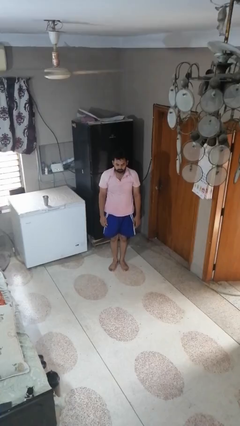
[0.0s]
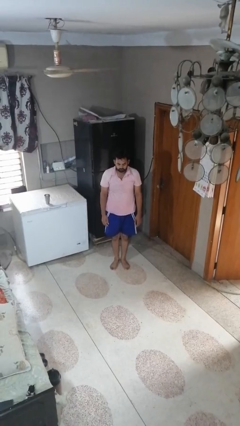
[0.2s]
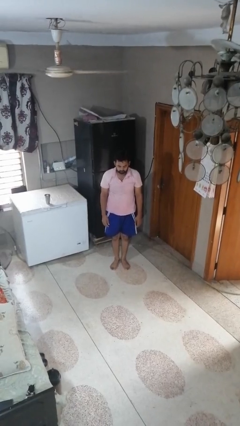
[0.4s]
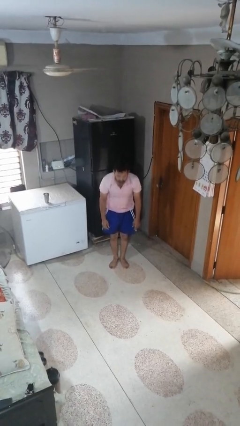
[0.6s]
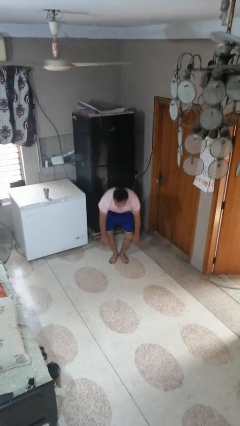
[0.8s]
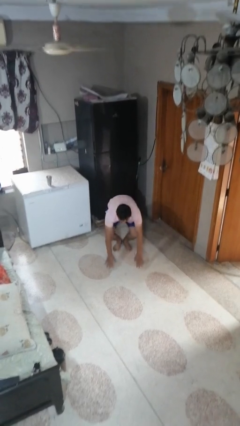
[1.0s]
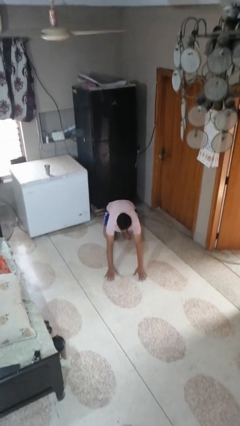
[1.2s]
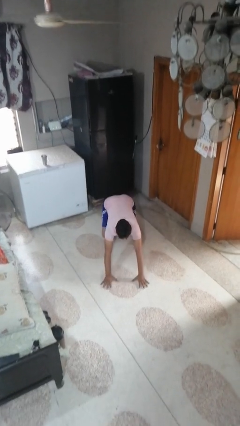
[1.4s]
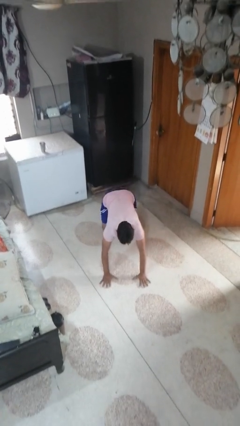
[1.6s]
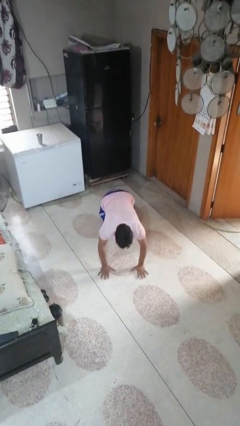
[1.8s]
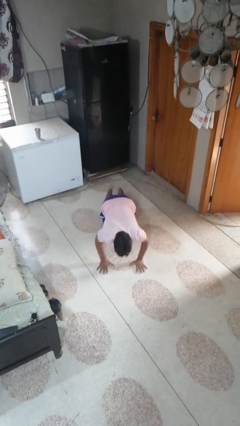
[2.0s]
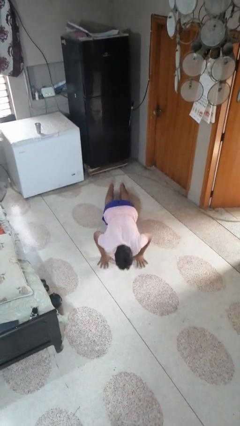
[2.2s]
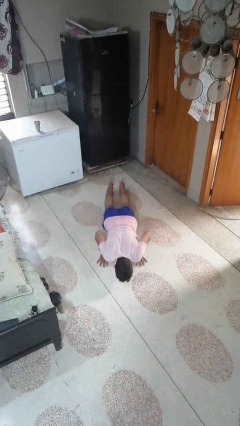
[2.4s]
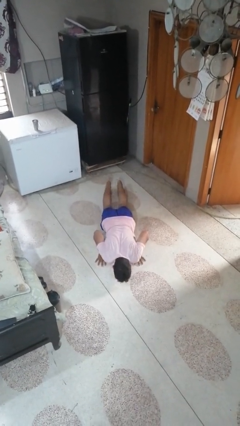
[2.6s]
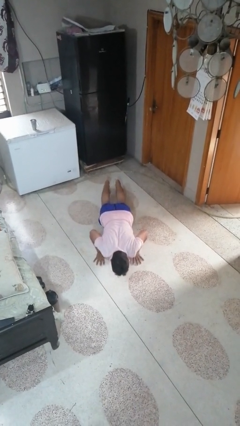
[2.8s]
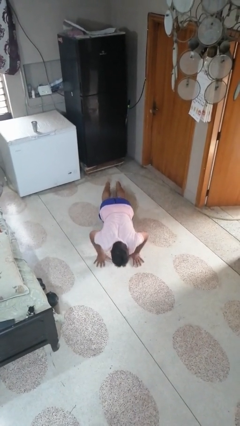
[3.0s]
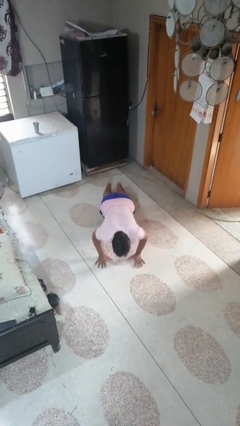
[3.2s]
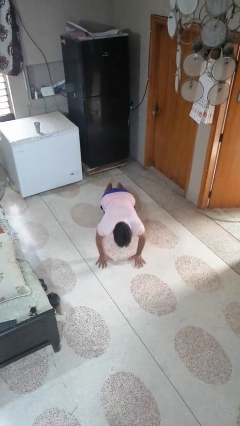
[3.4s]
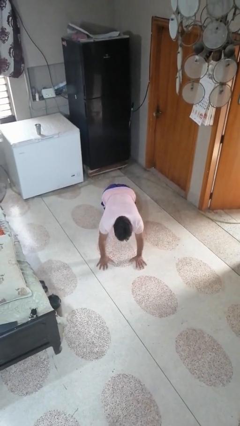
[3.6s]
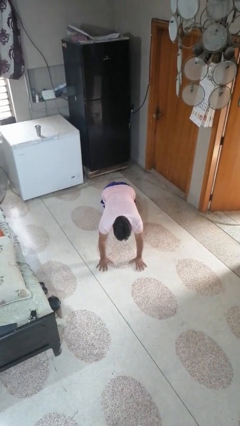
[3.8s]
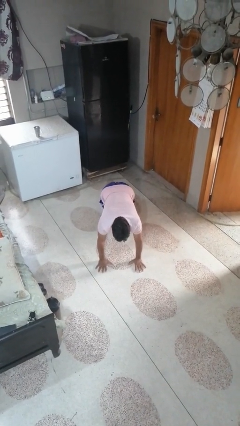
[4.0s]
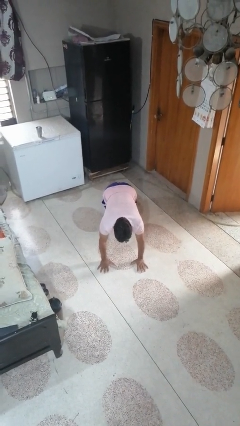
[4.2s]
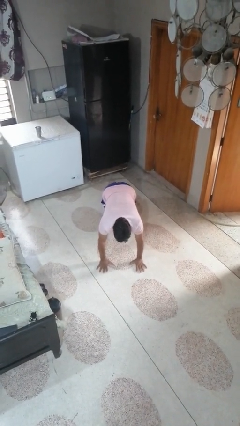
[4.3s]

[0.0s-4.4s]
person exercises with pushup

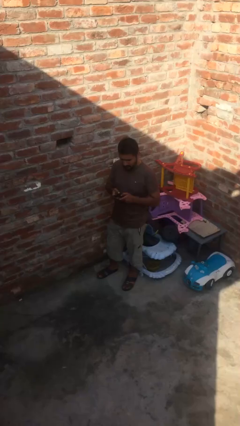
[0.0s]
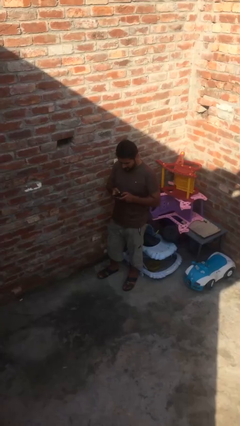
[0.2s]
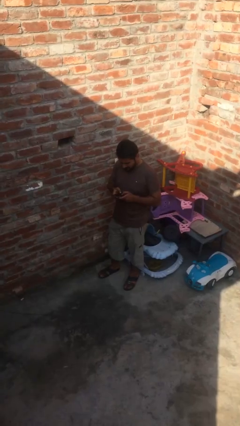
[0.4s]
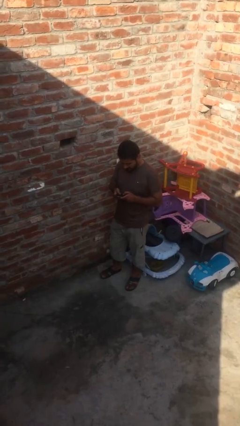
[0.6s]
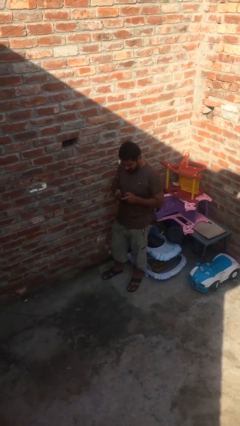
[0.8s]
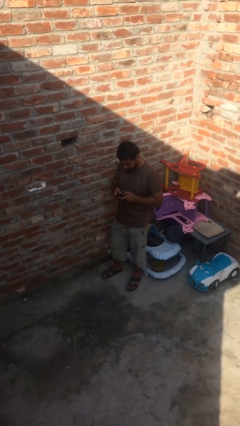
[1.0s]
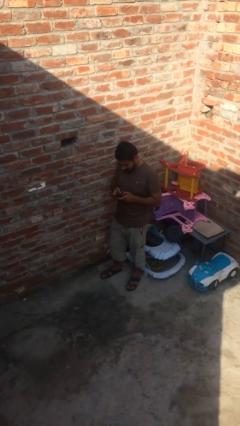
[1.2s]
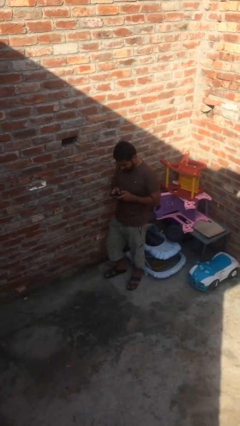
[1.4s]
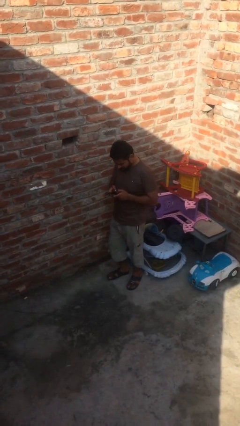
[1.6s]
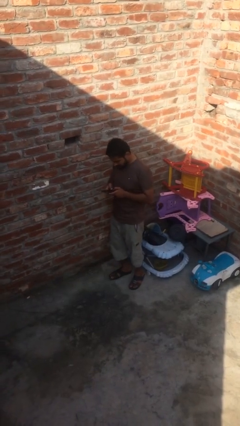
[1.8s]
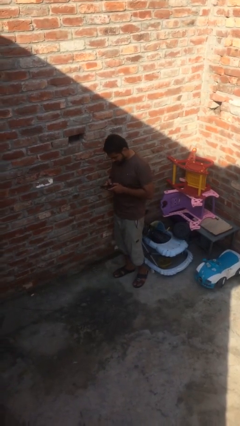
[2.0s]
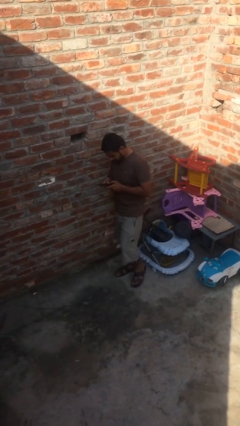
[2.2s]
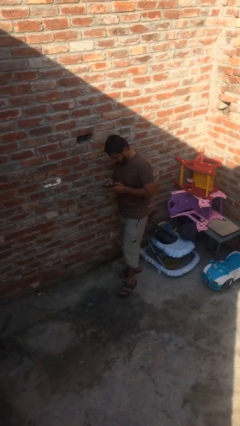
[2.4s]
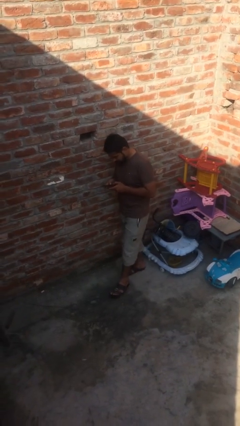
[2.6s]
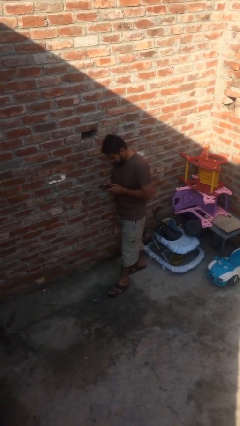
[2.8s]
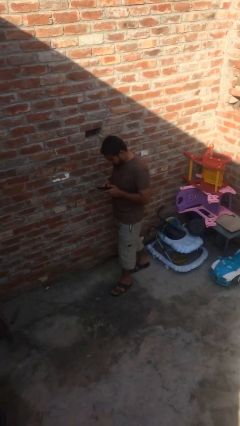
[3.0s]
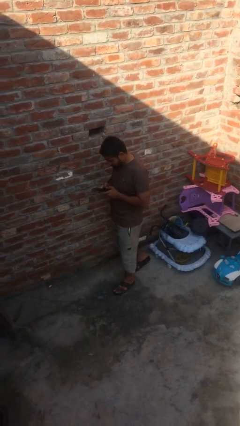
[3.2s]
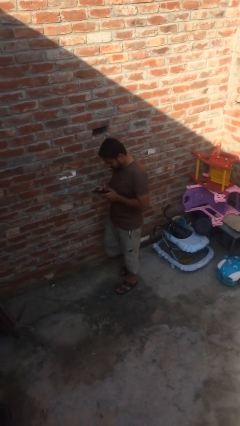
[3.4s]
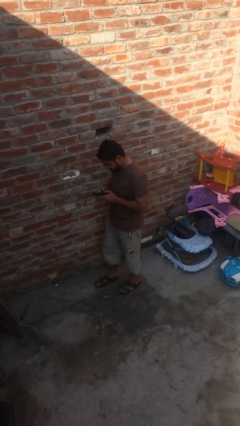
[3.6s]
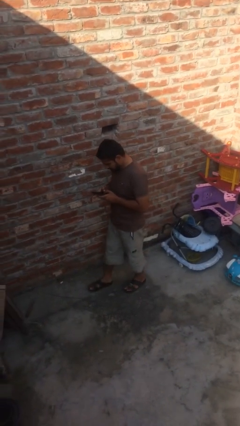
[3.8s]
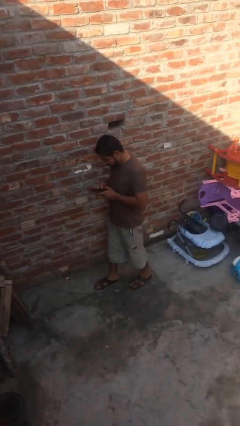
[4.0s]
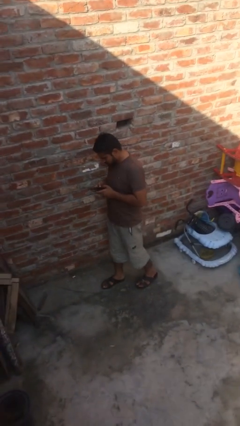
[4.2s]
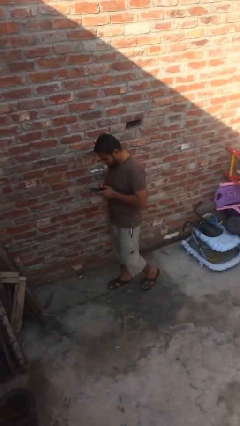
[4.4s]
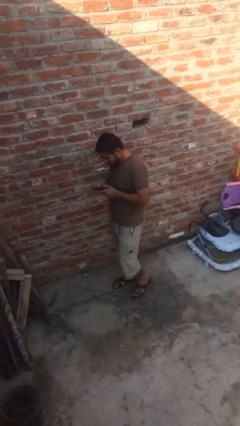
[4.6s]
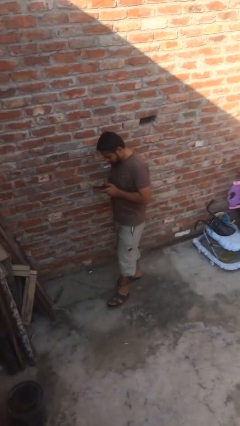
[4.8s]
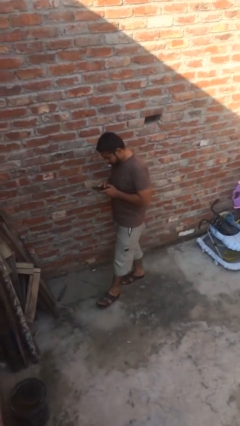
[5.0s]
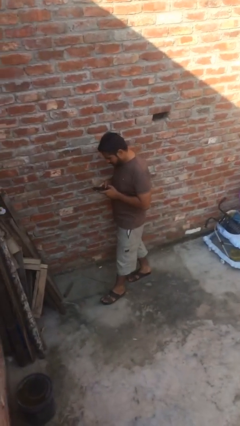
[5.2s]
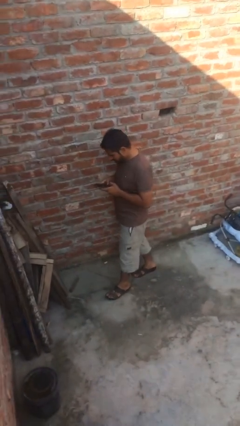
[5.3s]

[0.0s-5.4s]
person texts on phone

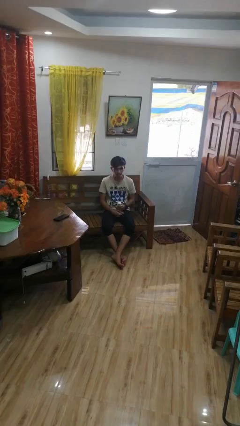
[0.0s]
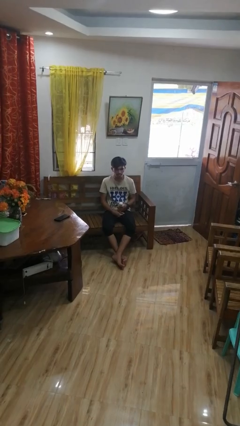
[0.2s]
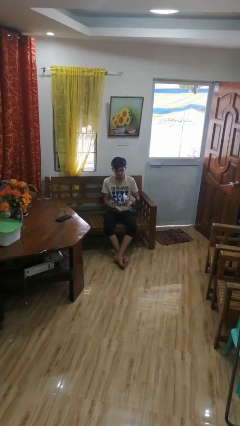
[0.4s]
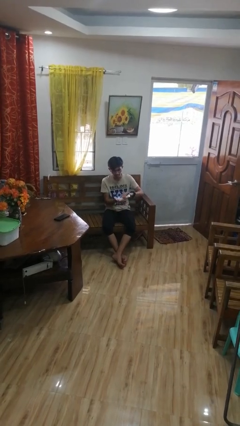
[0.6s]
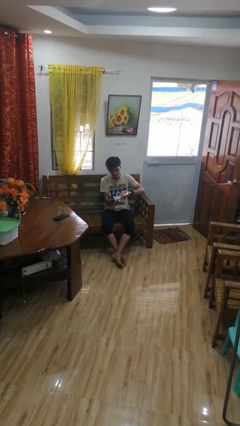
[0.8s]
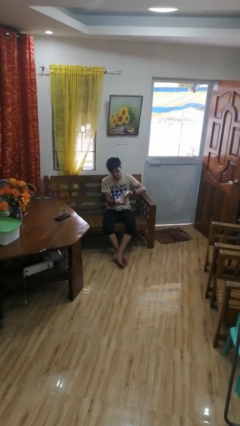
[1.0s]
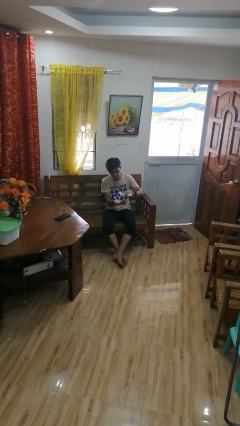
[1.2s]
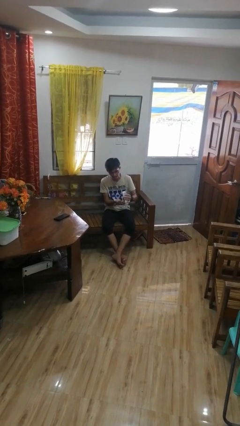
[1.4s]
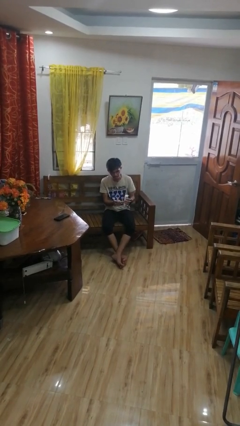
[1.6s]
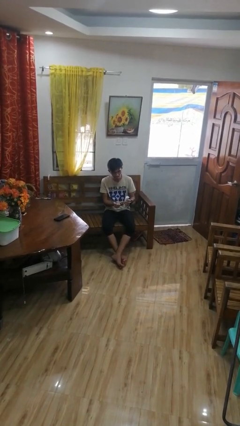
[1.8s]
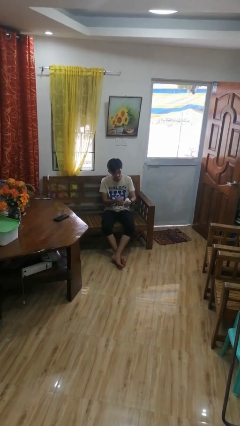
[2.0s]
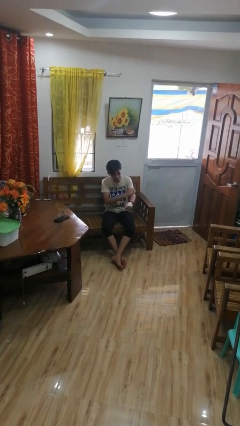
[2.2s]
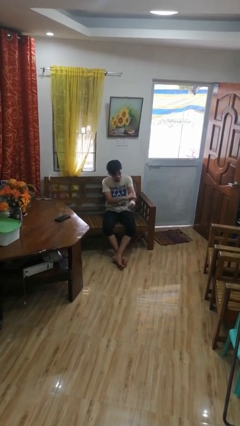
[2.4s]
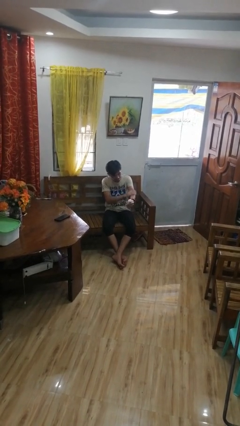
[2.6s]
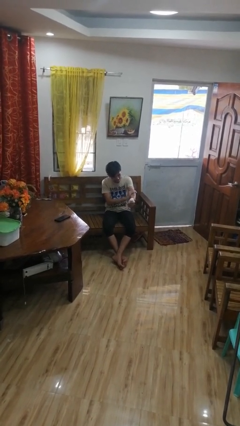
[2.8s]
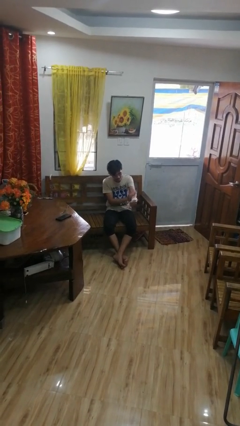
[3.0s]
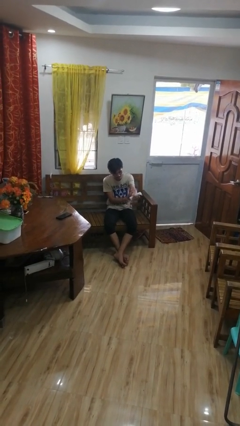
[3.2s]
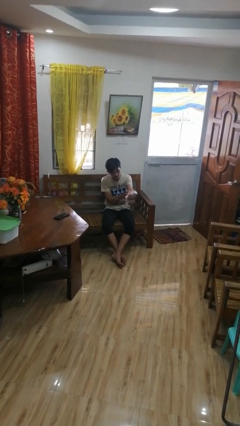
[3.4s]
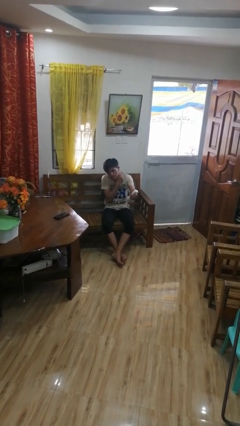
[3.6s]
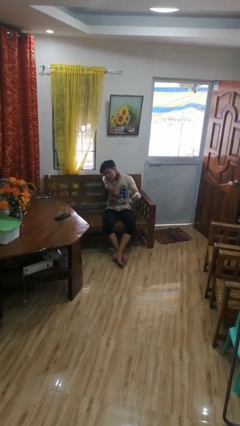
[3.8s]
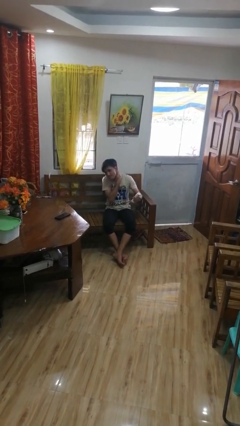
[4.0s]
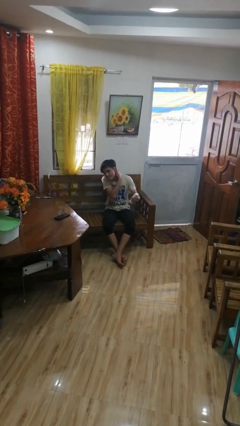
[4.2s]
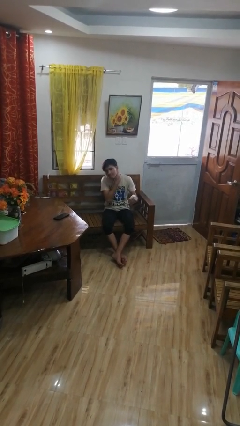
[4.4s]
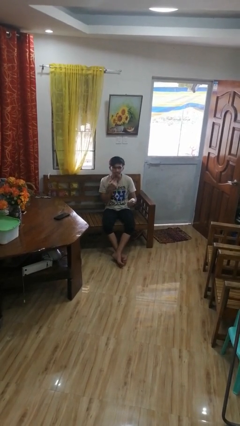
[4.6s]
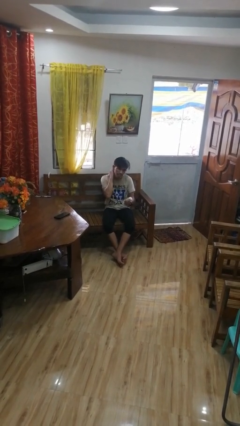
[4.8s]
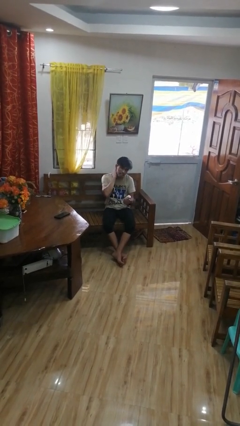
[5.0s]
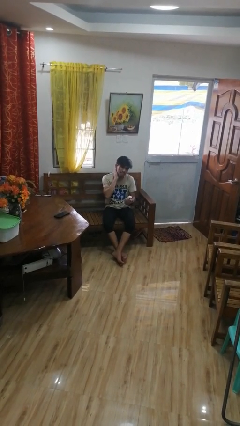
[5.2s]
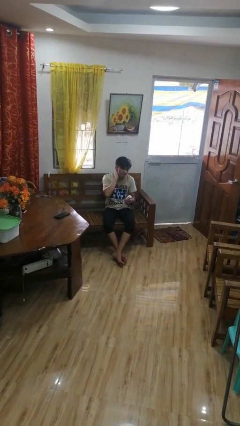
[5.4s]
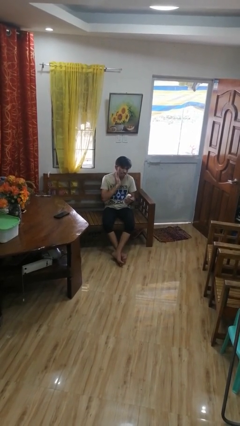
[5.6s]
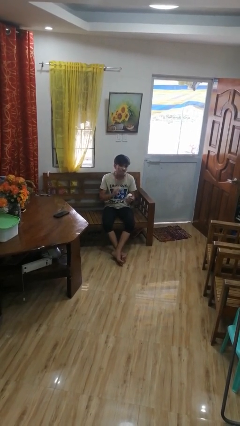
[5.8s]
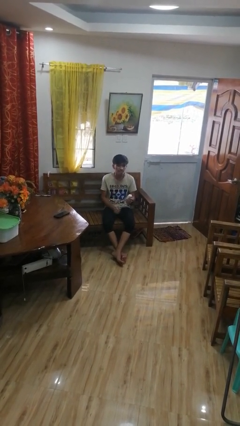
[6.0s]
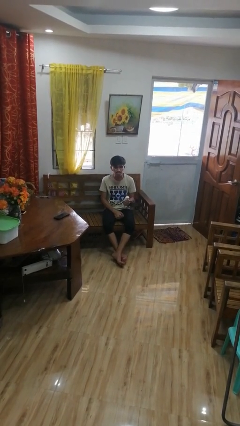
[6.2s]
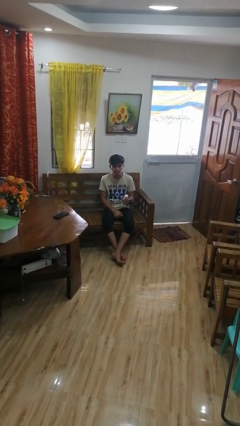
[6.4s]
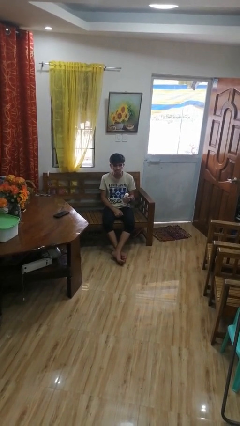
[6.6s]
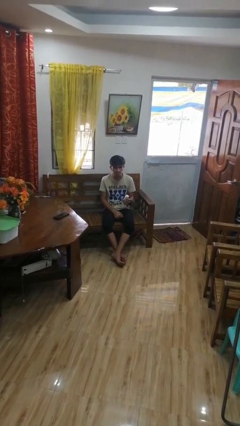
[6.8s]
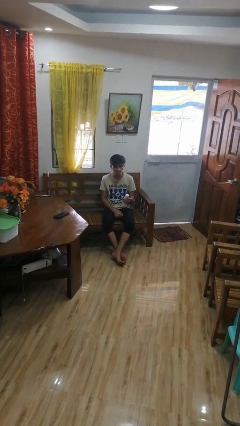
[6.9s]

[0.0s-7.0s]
person applies sunscreen

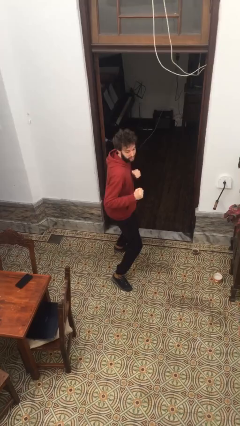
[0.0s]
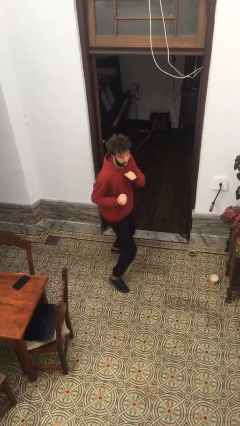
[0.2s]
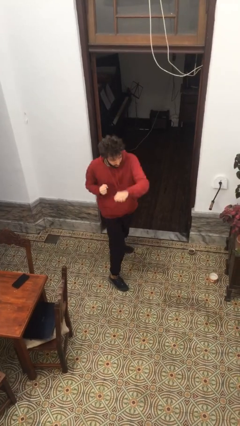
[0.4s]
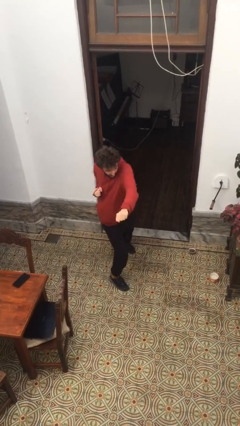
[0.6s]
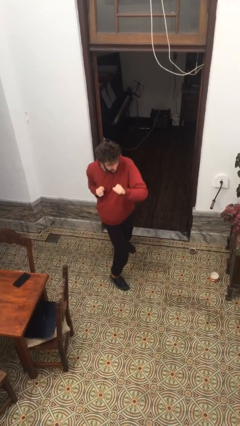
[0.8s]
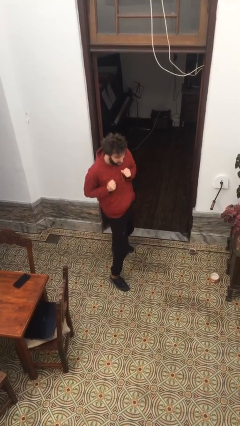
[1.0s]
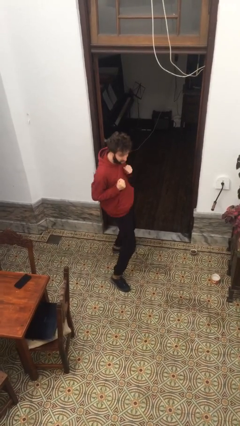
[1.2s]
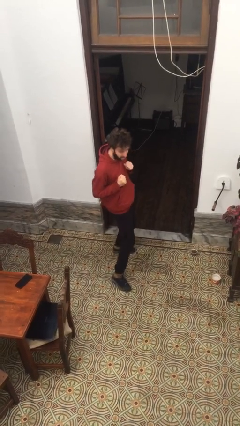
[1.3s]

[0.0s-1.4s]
person karate chop
